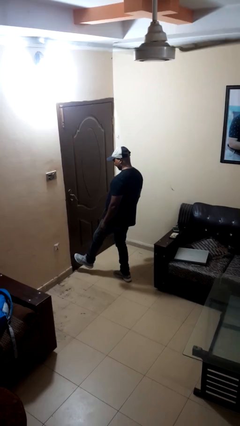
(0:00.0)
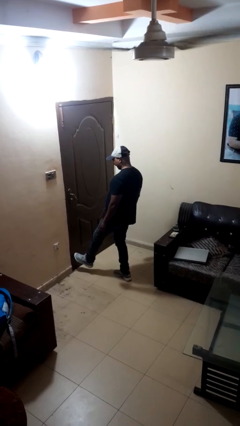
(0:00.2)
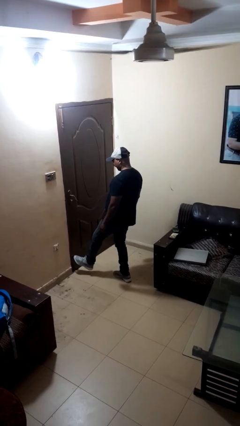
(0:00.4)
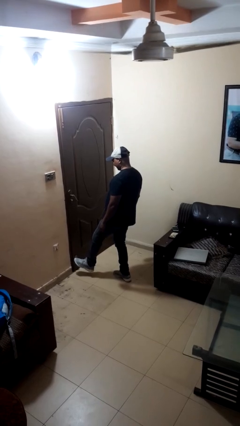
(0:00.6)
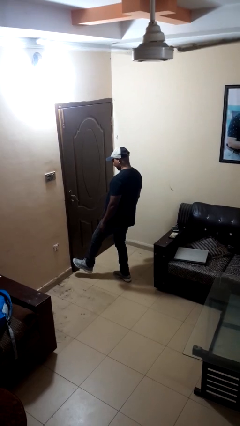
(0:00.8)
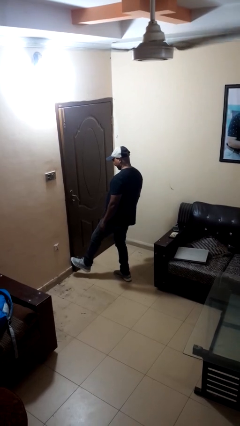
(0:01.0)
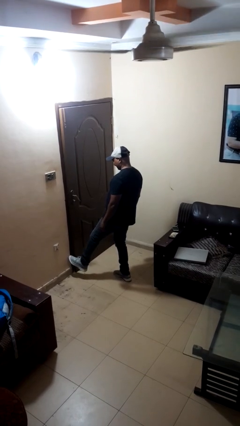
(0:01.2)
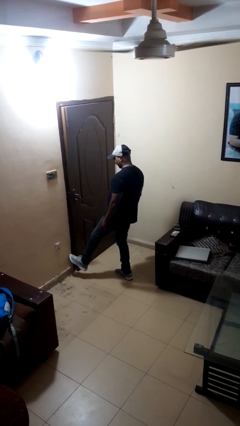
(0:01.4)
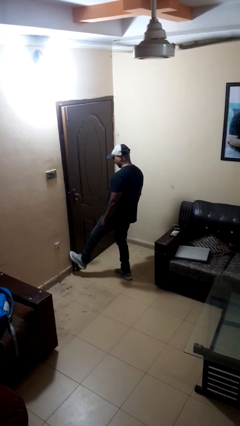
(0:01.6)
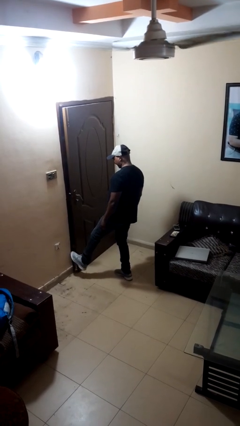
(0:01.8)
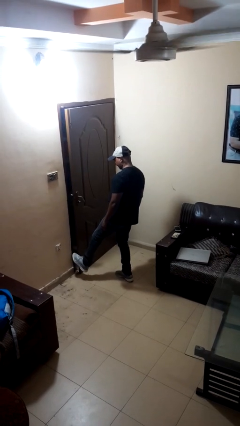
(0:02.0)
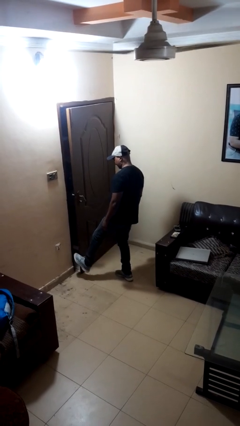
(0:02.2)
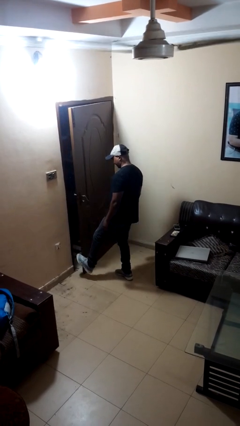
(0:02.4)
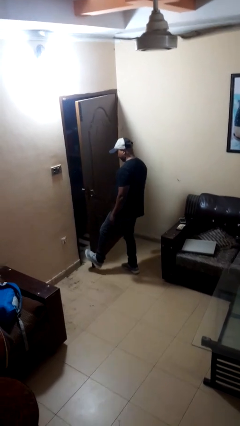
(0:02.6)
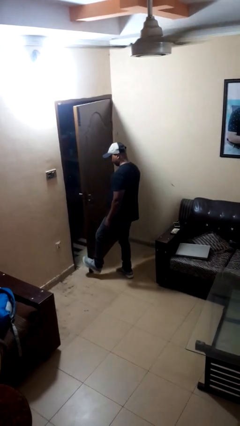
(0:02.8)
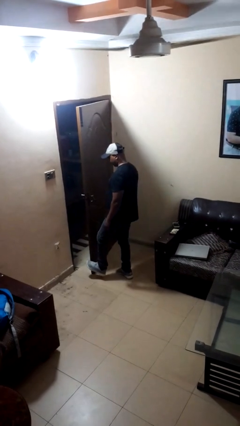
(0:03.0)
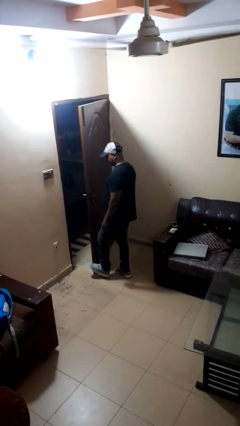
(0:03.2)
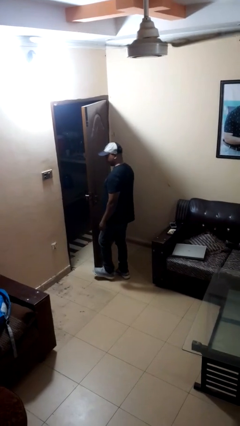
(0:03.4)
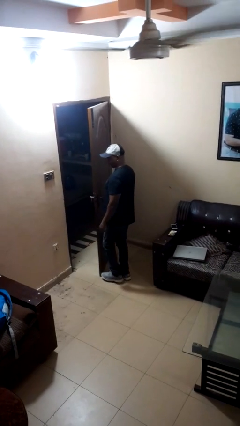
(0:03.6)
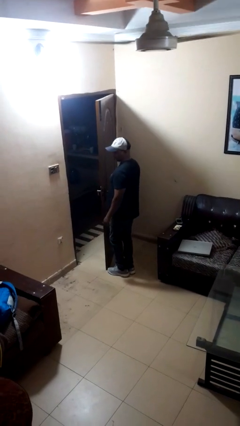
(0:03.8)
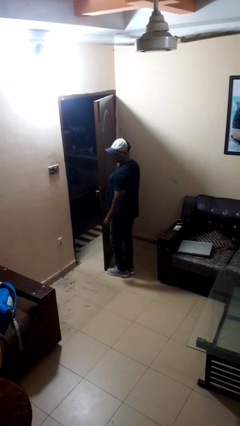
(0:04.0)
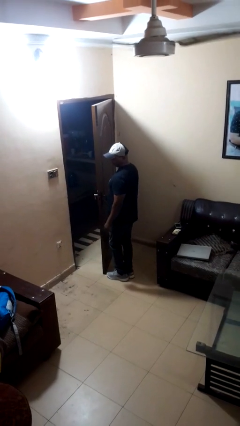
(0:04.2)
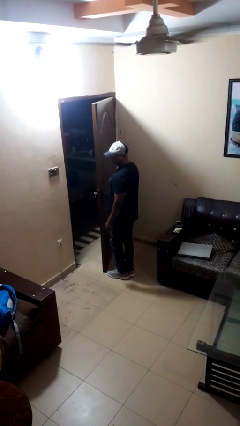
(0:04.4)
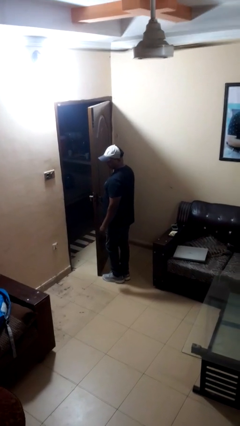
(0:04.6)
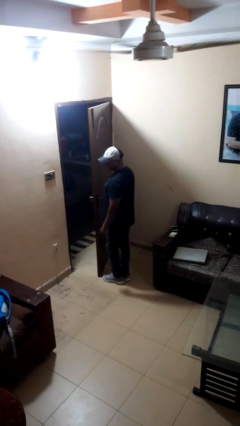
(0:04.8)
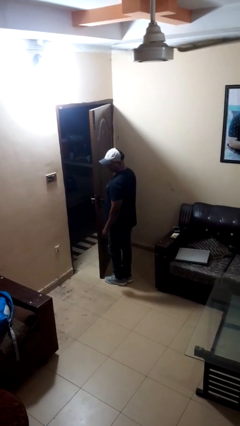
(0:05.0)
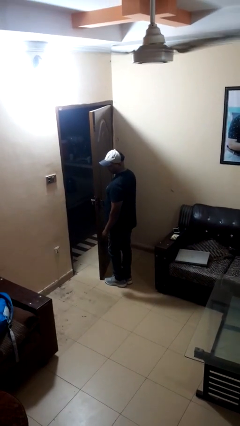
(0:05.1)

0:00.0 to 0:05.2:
person opens facility door

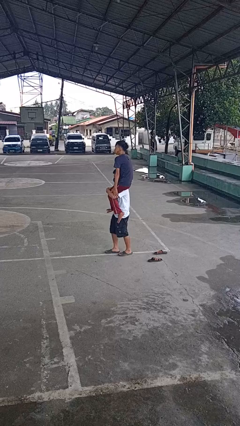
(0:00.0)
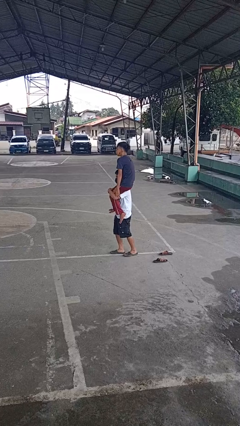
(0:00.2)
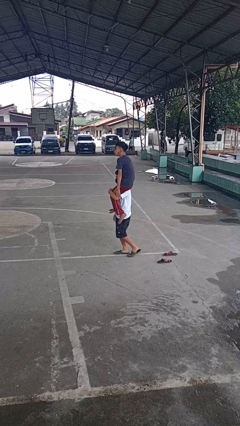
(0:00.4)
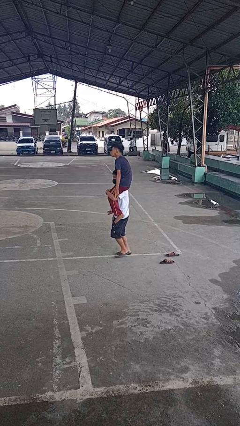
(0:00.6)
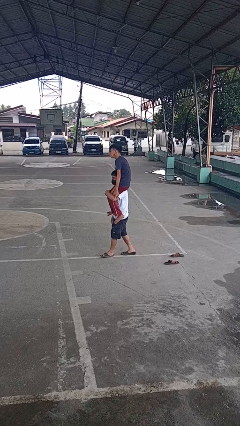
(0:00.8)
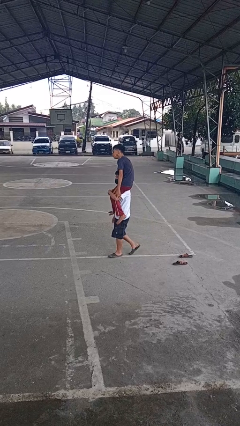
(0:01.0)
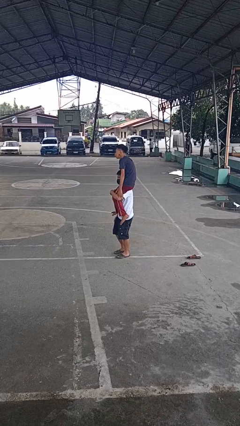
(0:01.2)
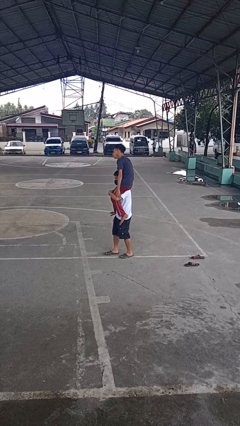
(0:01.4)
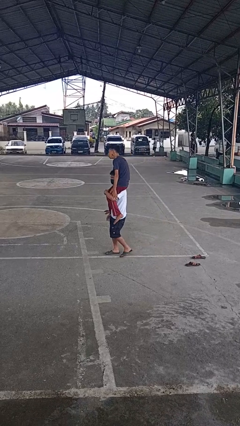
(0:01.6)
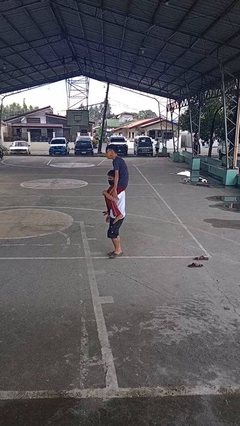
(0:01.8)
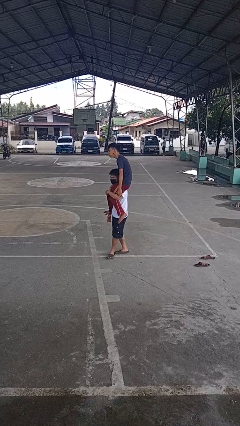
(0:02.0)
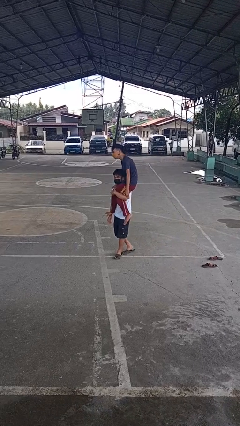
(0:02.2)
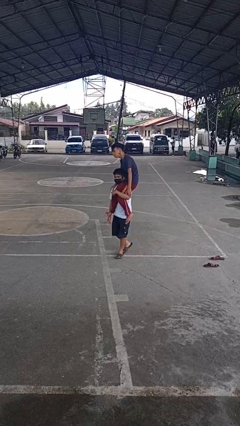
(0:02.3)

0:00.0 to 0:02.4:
person carries person on shoulders

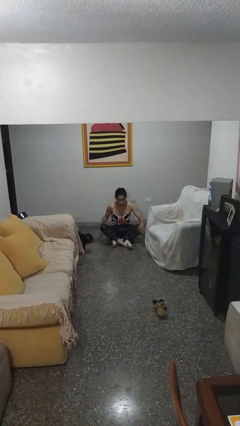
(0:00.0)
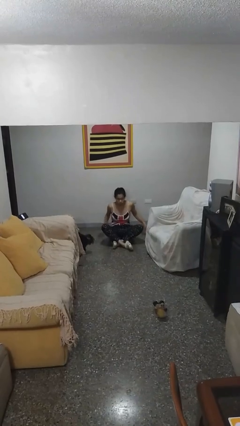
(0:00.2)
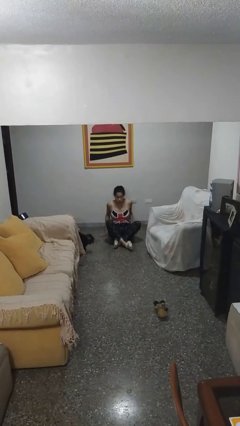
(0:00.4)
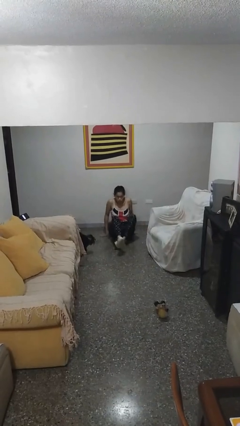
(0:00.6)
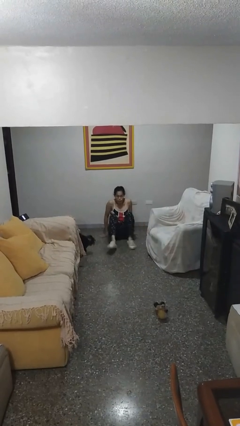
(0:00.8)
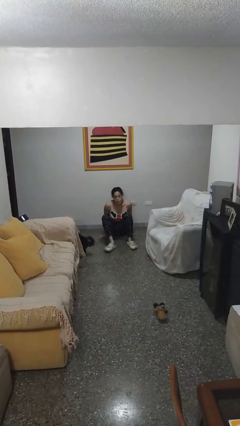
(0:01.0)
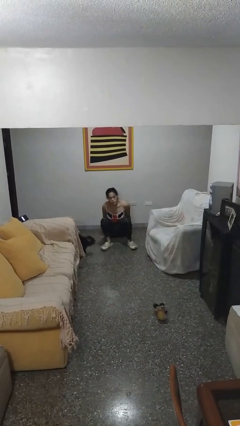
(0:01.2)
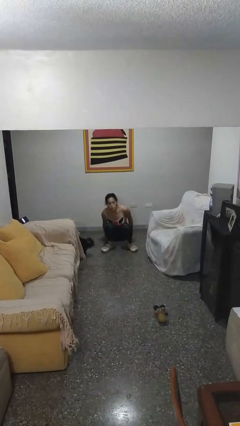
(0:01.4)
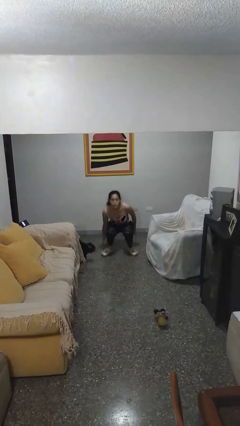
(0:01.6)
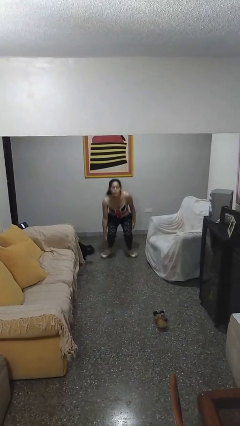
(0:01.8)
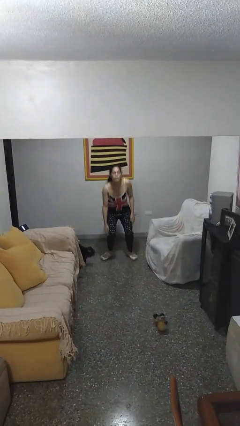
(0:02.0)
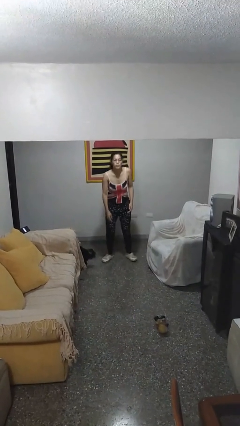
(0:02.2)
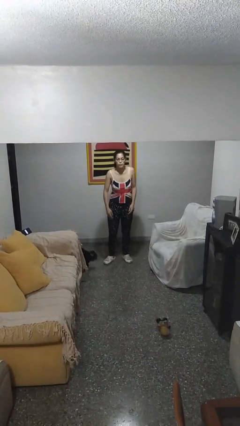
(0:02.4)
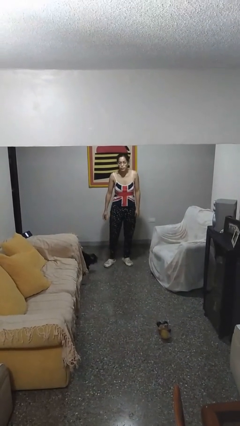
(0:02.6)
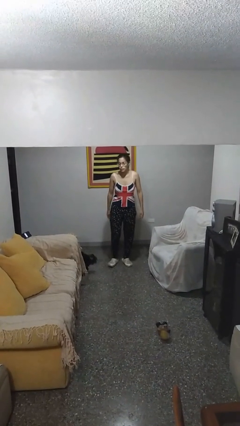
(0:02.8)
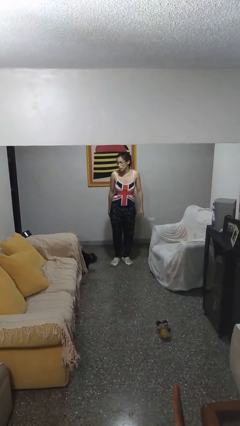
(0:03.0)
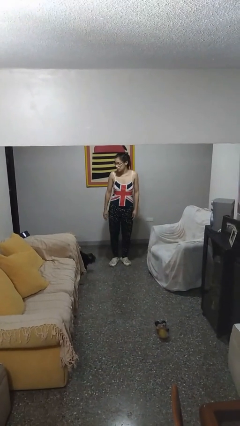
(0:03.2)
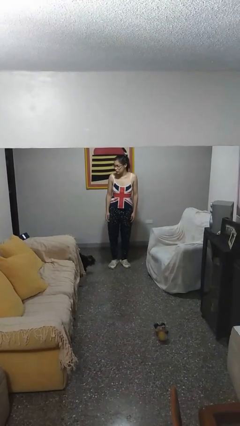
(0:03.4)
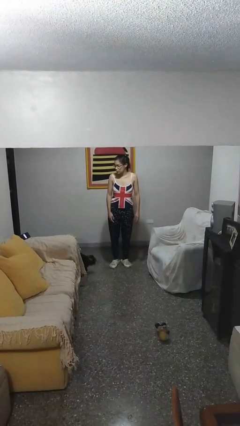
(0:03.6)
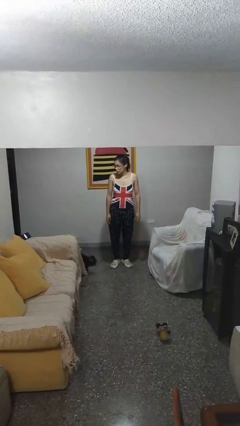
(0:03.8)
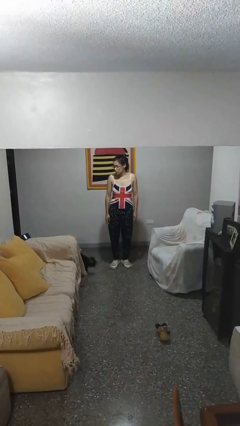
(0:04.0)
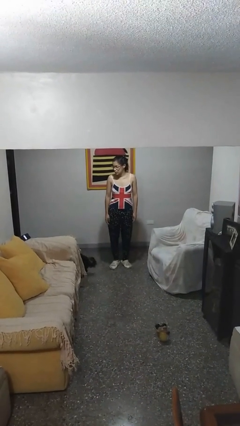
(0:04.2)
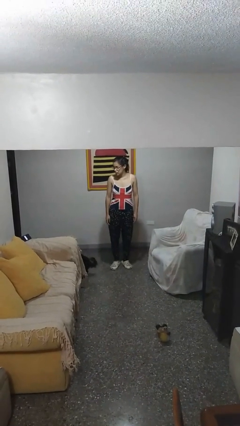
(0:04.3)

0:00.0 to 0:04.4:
person stands up from floor

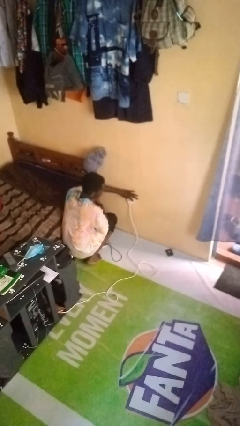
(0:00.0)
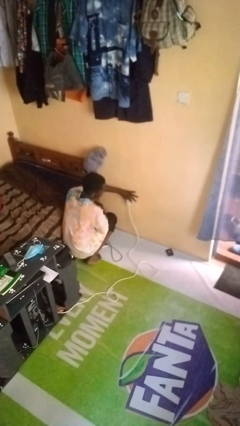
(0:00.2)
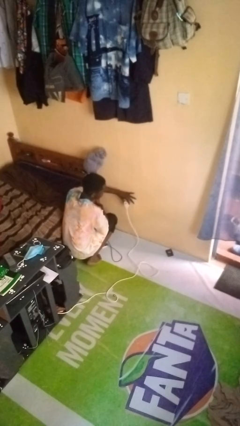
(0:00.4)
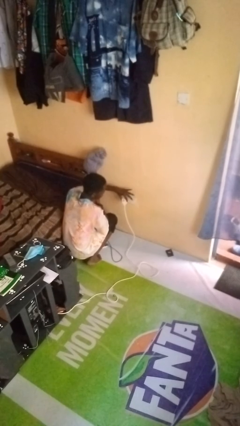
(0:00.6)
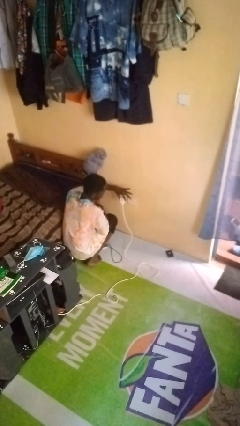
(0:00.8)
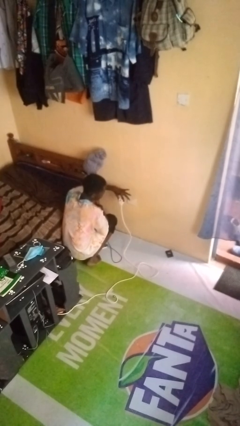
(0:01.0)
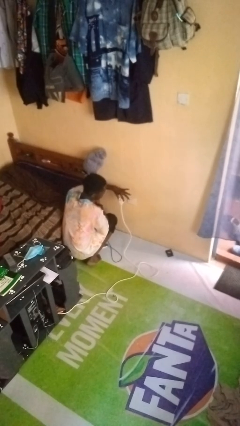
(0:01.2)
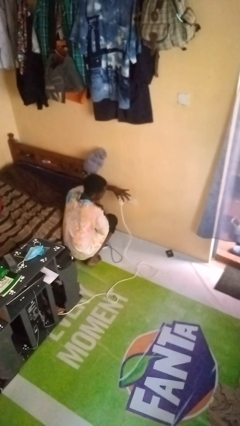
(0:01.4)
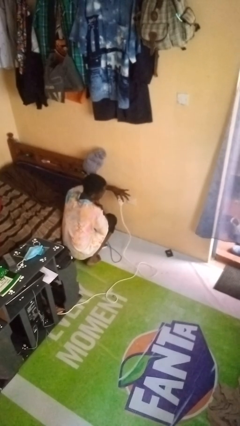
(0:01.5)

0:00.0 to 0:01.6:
person unplugs from electrical socket

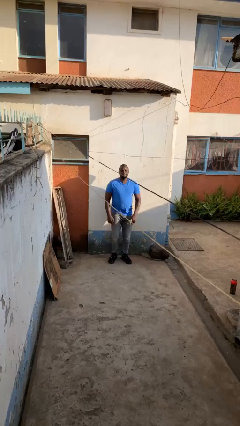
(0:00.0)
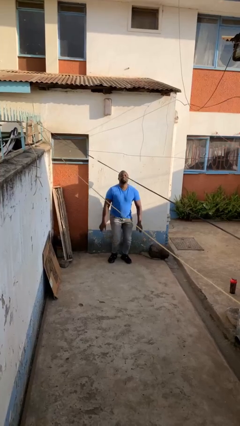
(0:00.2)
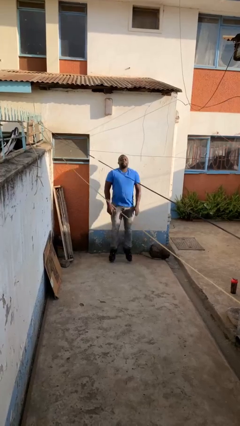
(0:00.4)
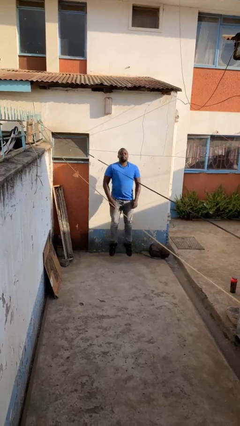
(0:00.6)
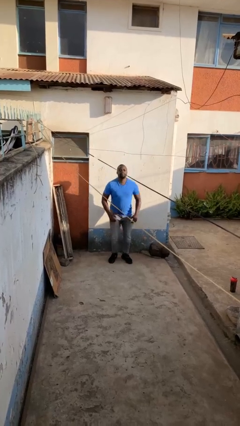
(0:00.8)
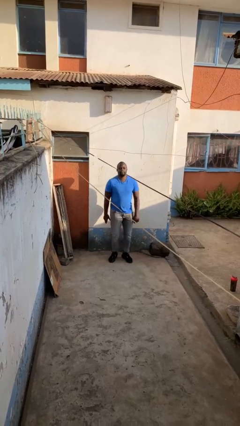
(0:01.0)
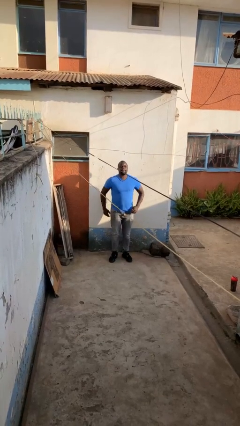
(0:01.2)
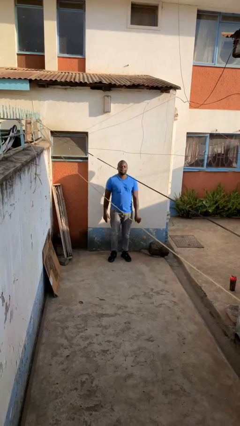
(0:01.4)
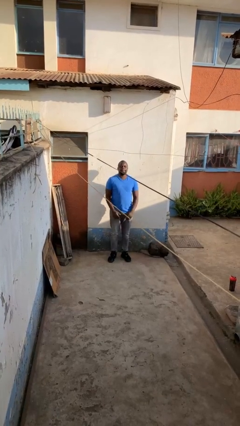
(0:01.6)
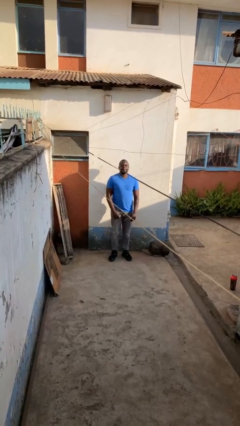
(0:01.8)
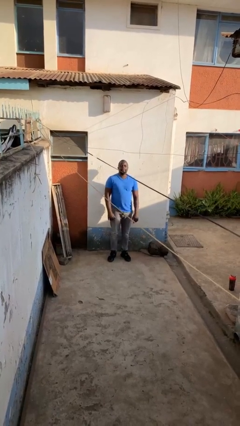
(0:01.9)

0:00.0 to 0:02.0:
person jumps

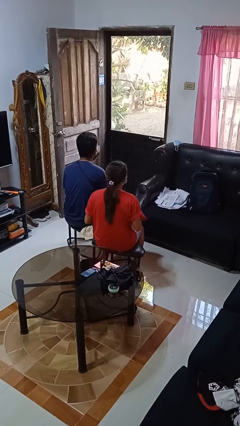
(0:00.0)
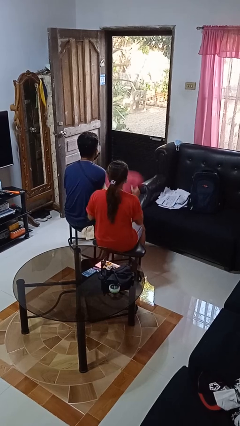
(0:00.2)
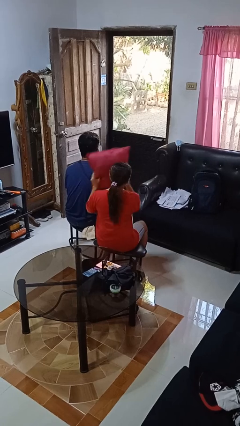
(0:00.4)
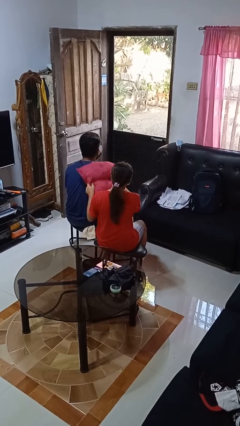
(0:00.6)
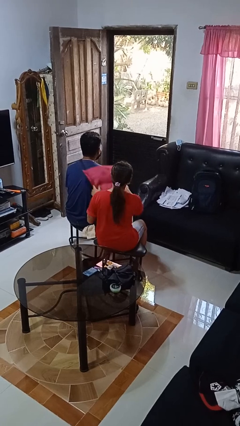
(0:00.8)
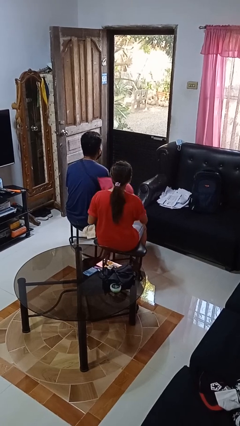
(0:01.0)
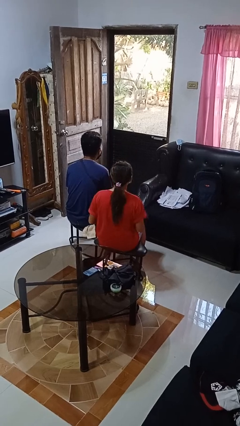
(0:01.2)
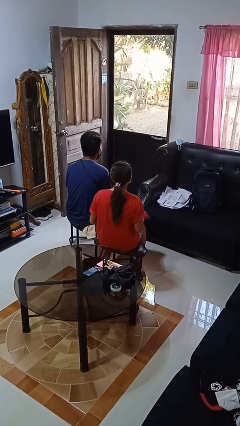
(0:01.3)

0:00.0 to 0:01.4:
person hits person with pillow

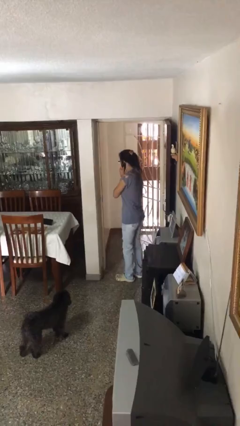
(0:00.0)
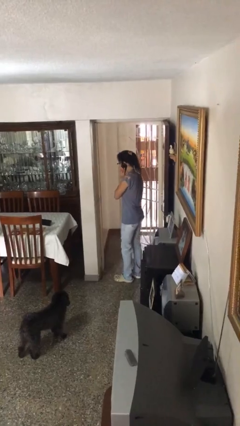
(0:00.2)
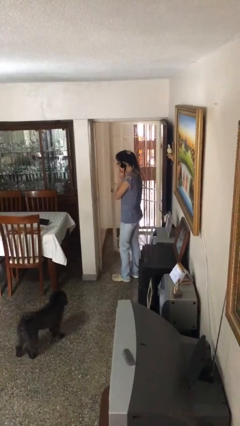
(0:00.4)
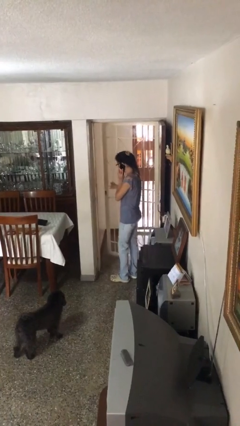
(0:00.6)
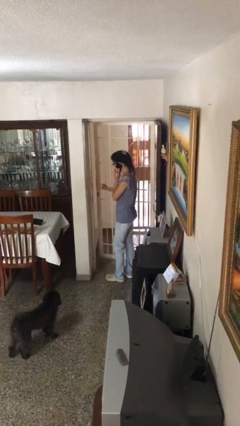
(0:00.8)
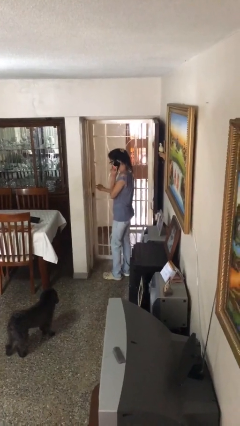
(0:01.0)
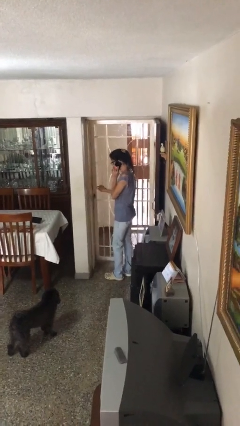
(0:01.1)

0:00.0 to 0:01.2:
person closes facility door
